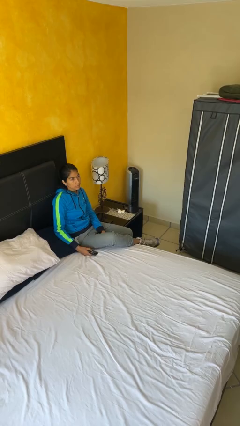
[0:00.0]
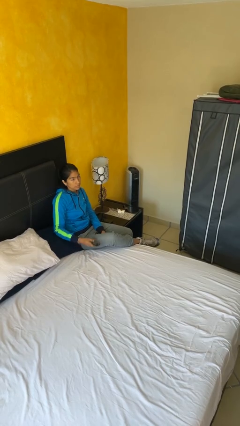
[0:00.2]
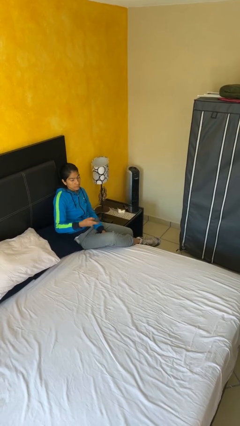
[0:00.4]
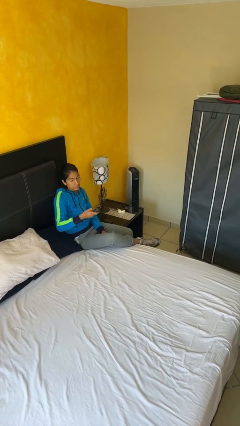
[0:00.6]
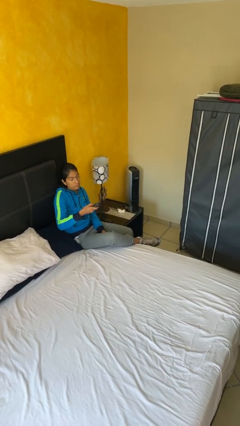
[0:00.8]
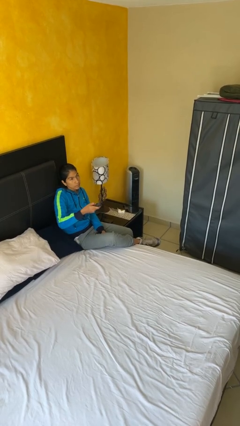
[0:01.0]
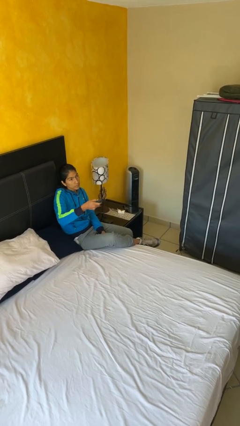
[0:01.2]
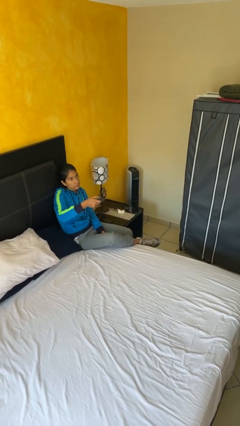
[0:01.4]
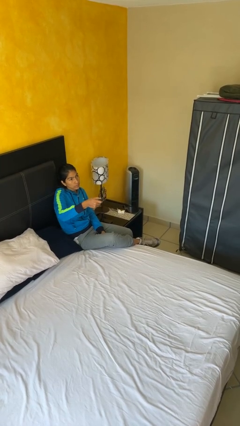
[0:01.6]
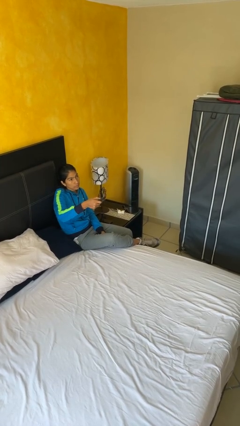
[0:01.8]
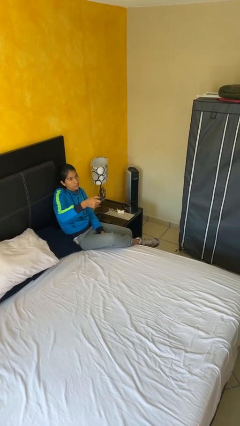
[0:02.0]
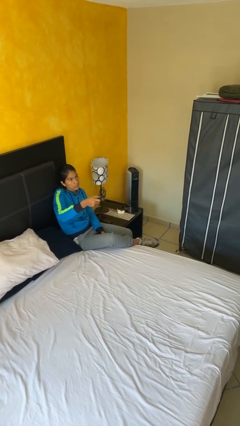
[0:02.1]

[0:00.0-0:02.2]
person uses television remote

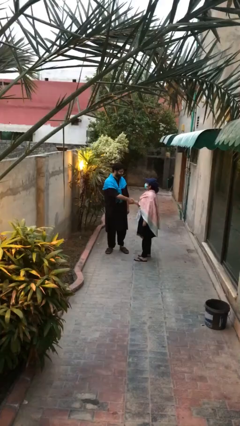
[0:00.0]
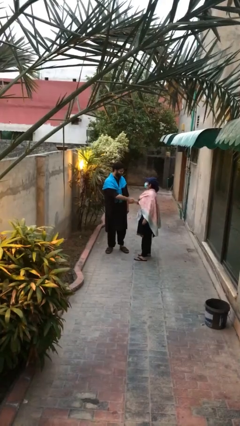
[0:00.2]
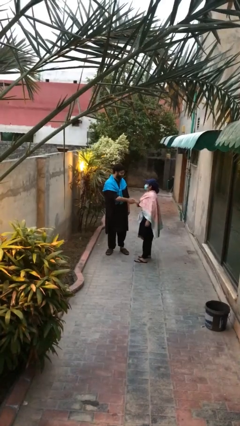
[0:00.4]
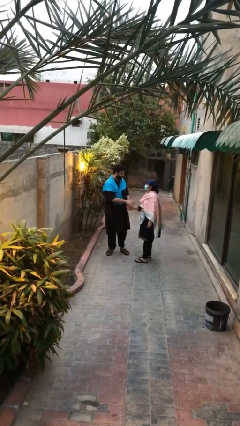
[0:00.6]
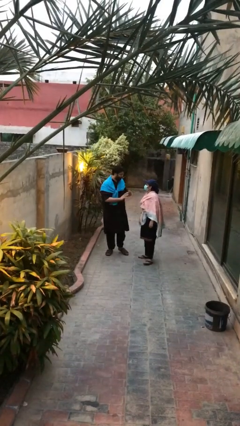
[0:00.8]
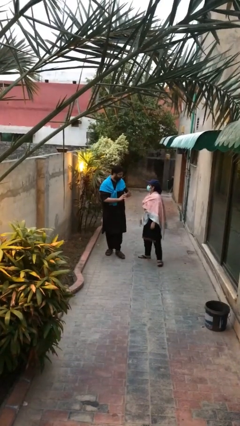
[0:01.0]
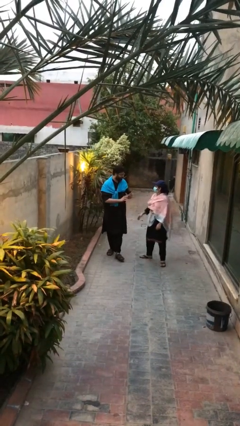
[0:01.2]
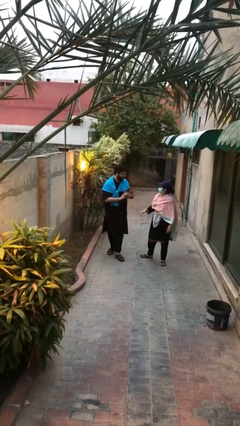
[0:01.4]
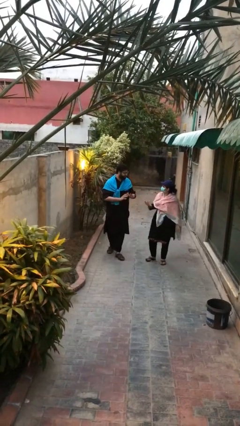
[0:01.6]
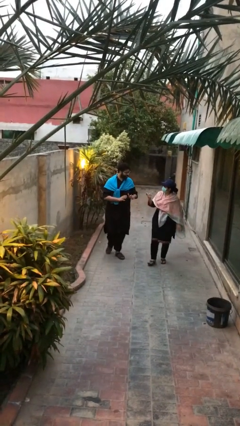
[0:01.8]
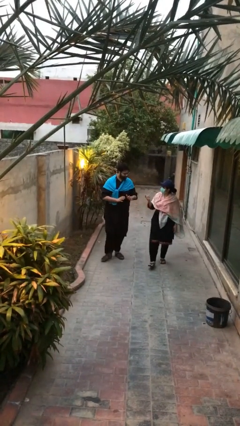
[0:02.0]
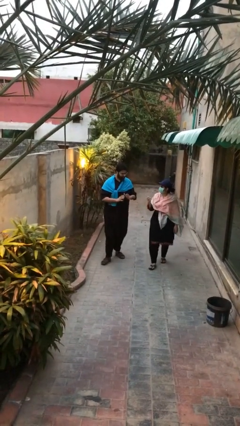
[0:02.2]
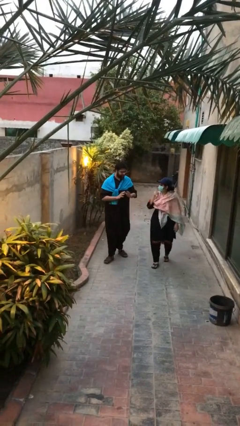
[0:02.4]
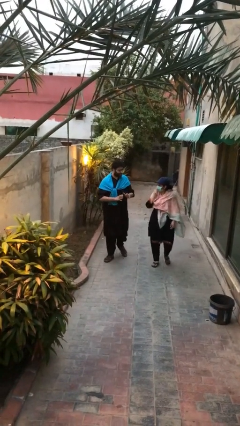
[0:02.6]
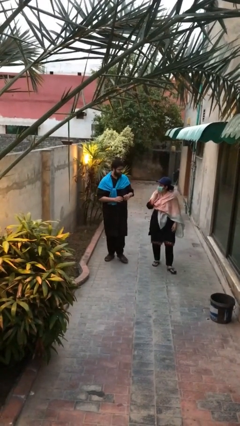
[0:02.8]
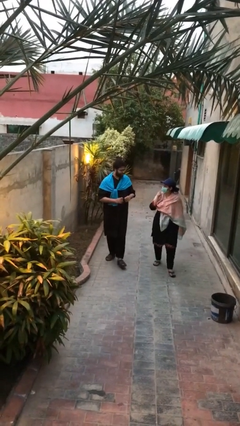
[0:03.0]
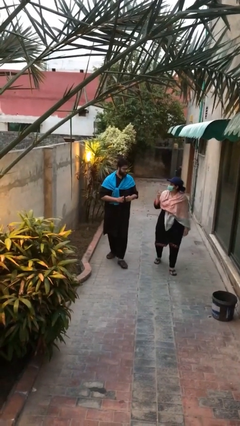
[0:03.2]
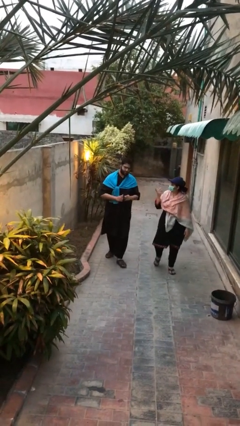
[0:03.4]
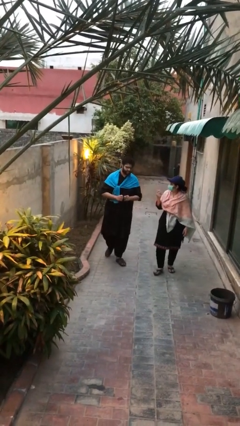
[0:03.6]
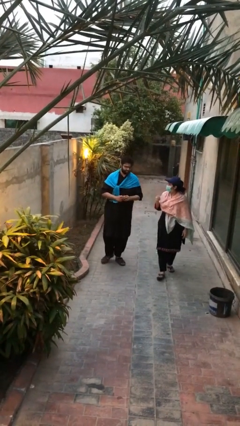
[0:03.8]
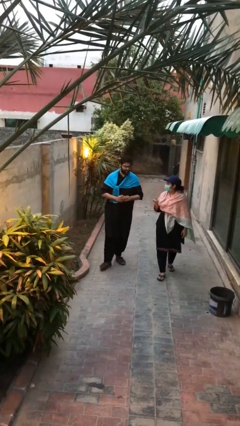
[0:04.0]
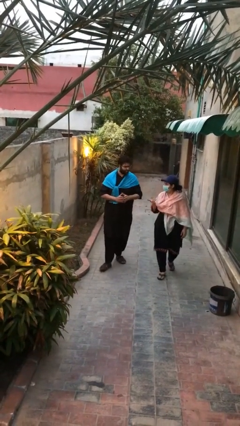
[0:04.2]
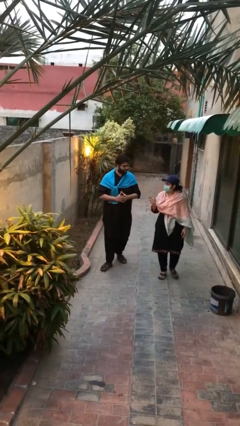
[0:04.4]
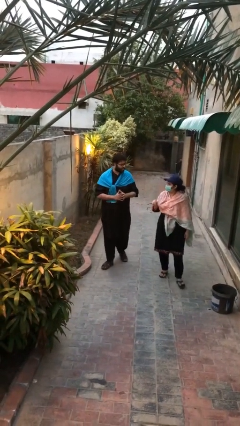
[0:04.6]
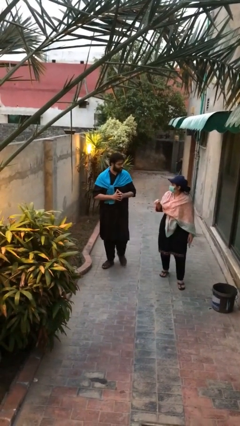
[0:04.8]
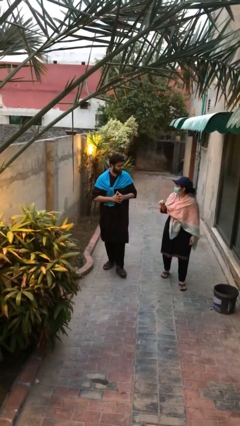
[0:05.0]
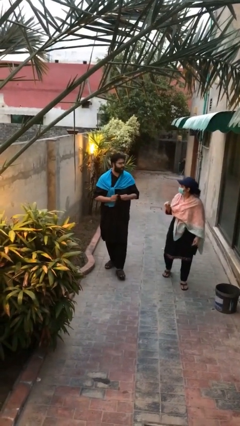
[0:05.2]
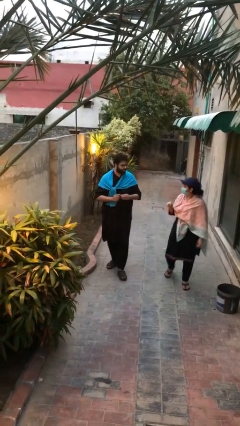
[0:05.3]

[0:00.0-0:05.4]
person talks to person

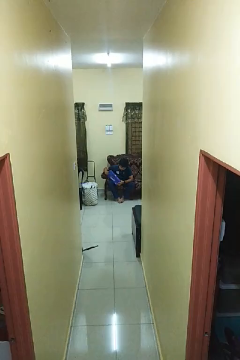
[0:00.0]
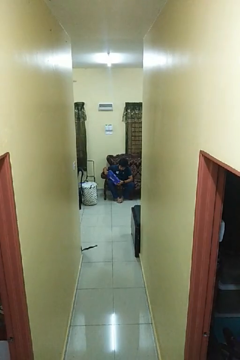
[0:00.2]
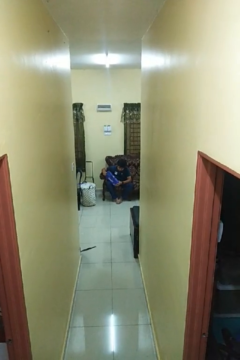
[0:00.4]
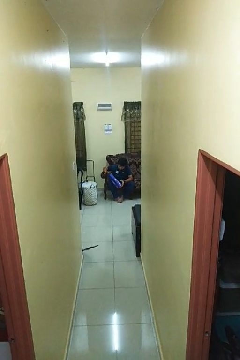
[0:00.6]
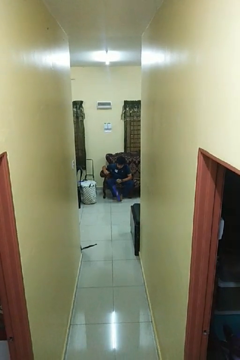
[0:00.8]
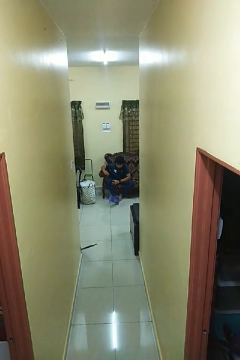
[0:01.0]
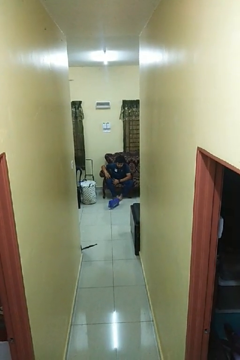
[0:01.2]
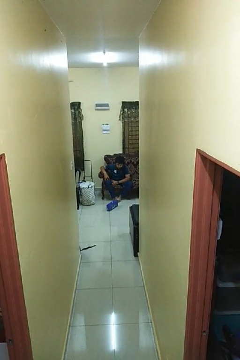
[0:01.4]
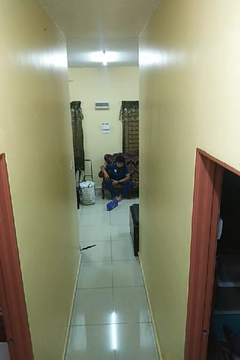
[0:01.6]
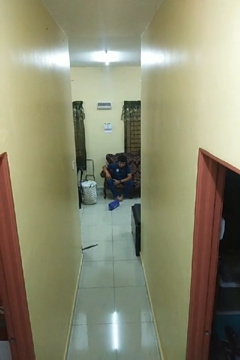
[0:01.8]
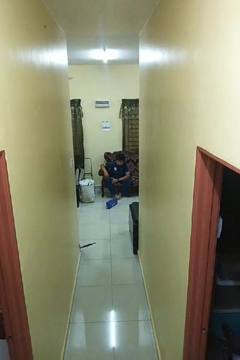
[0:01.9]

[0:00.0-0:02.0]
person drops object

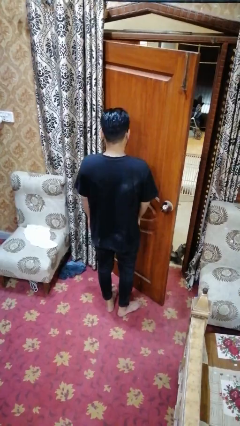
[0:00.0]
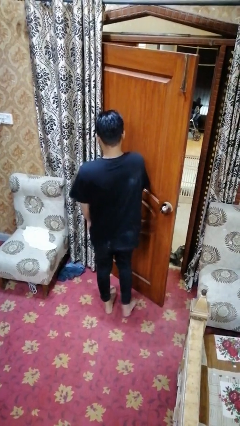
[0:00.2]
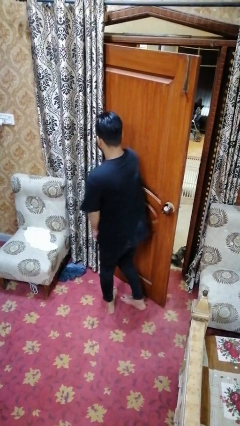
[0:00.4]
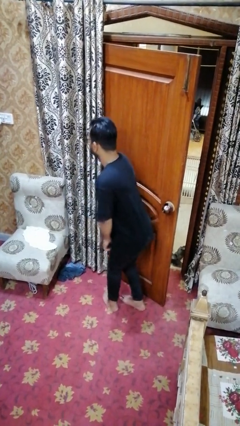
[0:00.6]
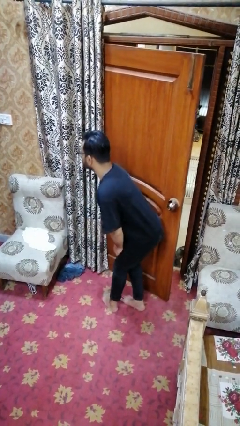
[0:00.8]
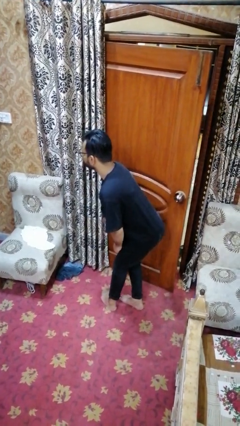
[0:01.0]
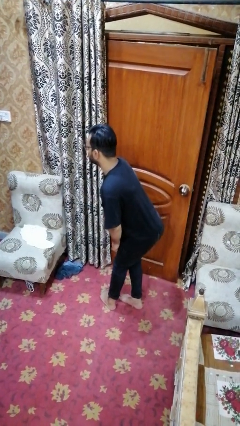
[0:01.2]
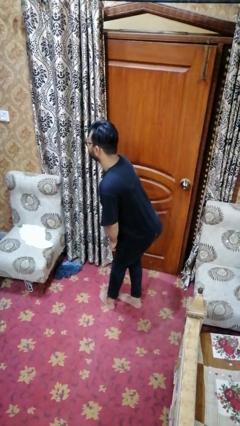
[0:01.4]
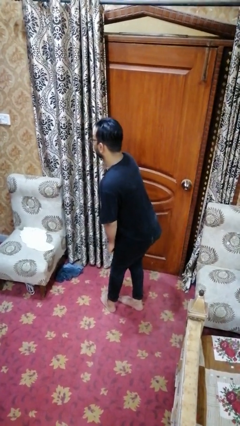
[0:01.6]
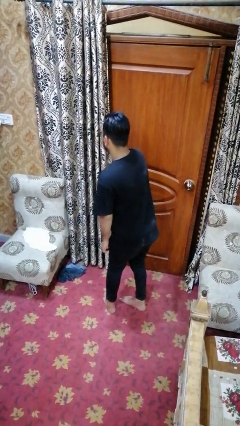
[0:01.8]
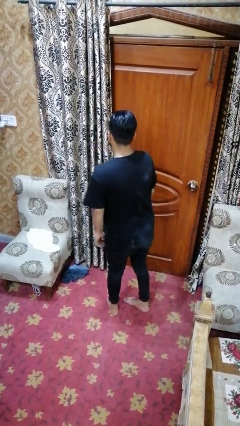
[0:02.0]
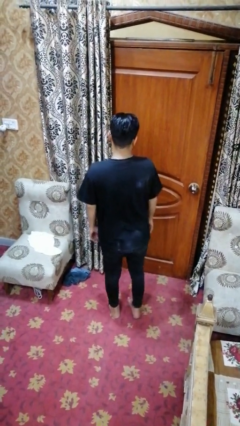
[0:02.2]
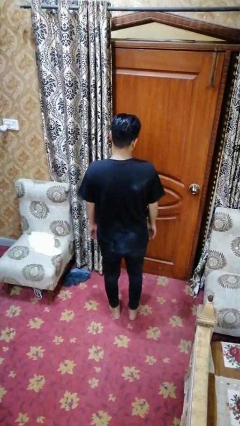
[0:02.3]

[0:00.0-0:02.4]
person closes door with hip

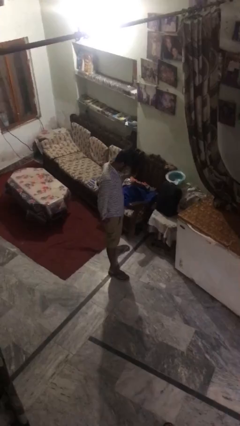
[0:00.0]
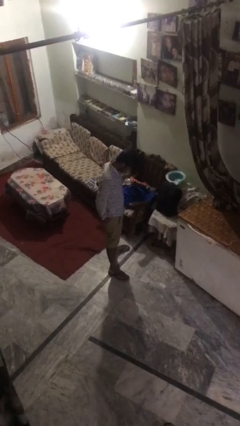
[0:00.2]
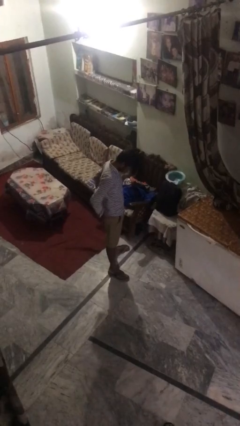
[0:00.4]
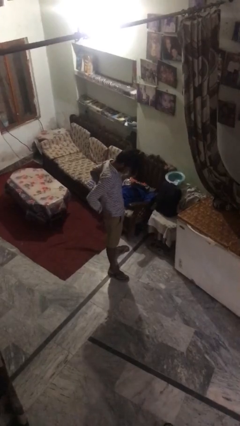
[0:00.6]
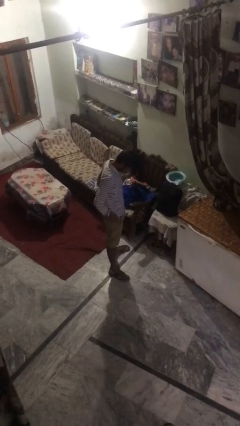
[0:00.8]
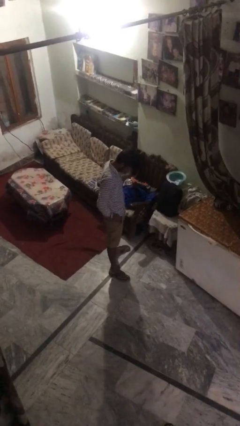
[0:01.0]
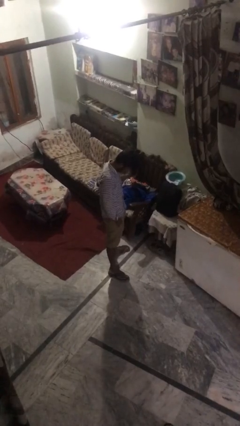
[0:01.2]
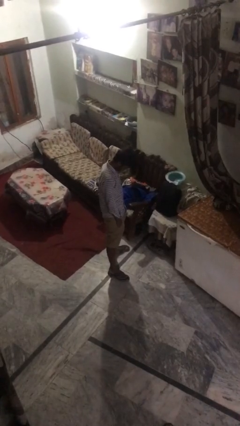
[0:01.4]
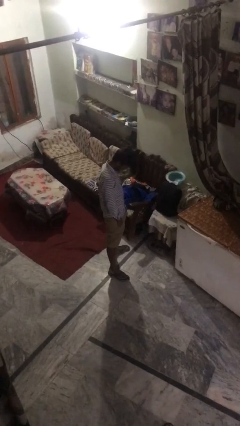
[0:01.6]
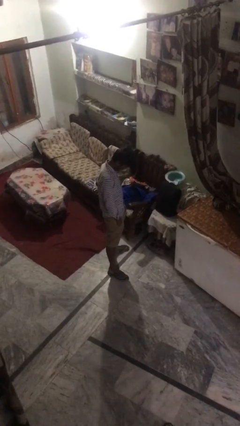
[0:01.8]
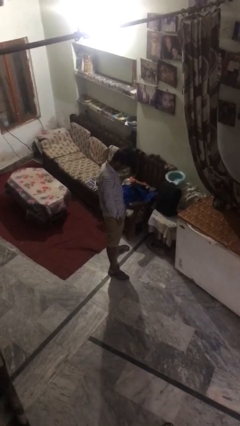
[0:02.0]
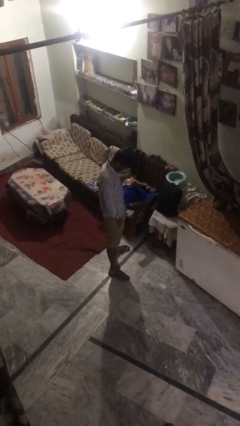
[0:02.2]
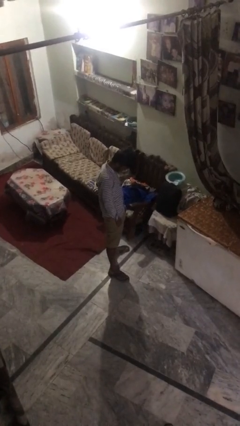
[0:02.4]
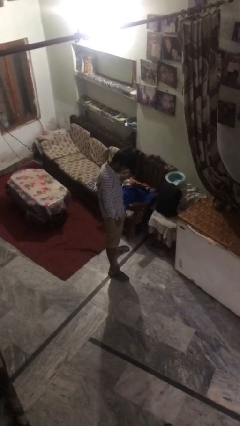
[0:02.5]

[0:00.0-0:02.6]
person puts hands in back pockets

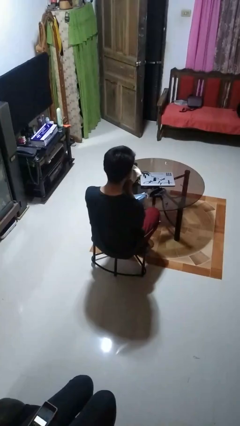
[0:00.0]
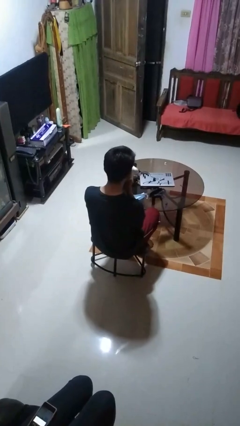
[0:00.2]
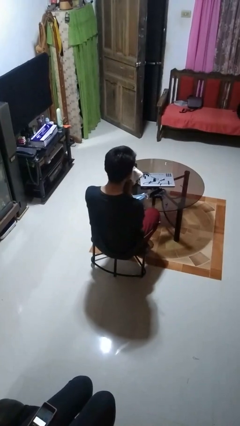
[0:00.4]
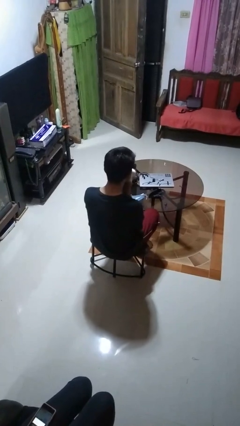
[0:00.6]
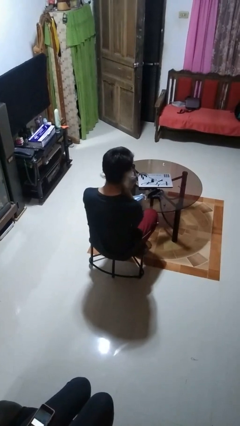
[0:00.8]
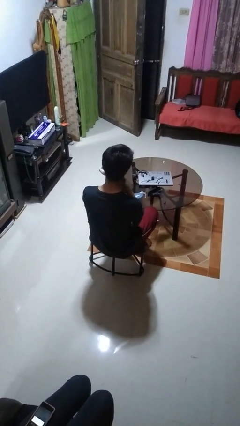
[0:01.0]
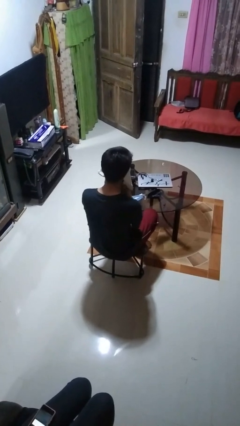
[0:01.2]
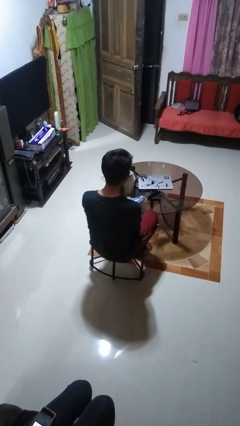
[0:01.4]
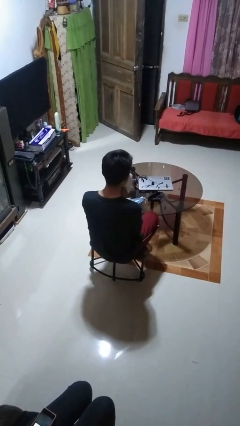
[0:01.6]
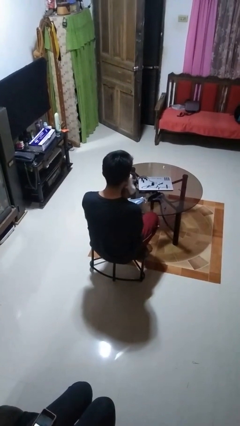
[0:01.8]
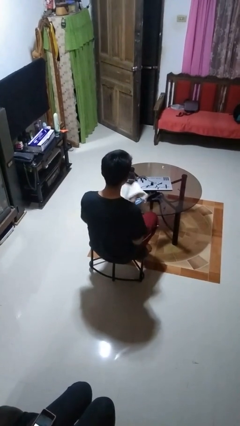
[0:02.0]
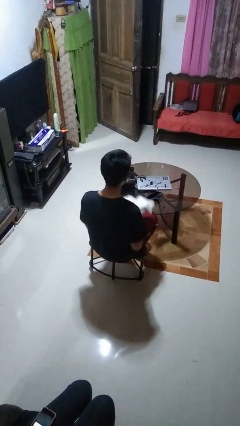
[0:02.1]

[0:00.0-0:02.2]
person wipes mouth with napkin

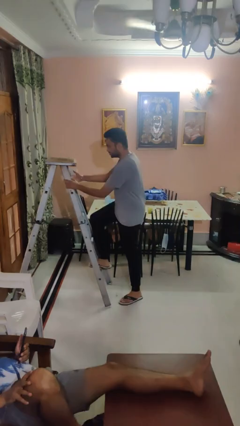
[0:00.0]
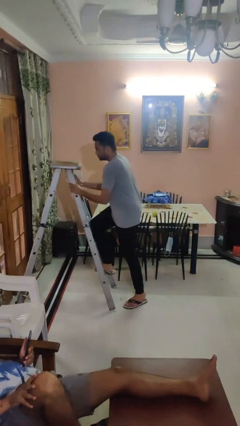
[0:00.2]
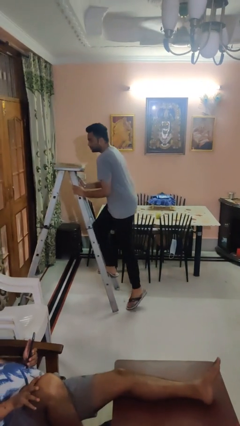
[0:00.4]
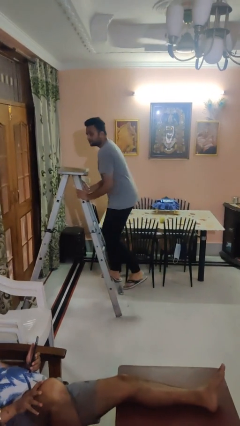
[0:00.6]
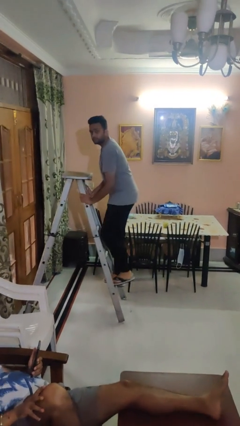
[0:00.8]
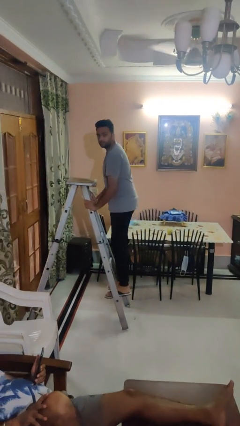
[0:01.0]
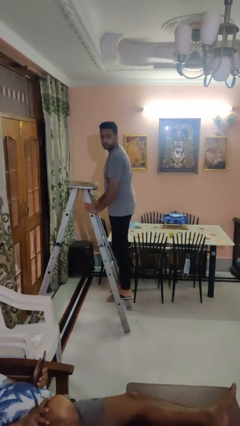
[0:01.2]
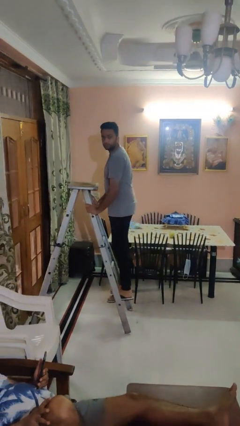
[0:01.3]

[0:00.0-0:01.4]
person climbs up ladder
